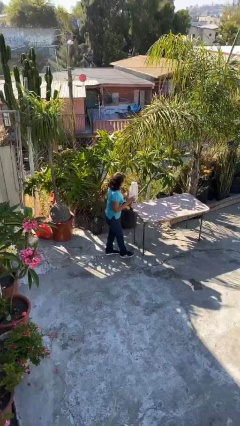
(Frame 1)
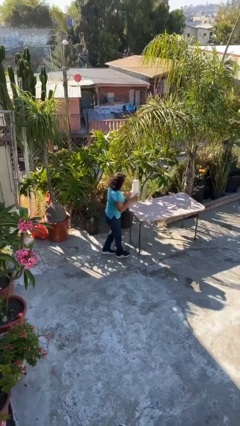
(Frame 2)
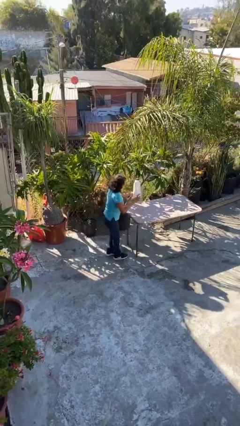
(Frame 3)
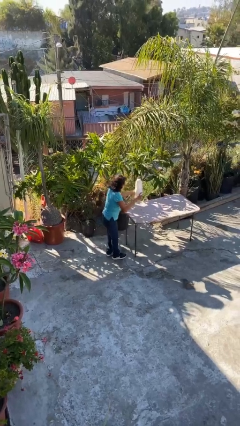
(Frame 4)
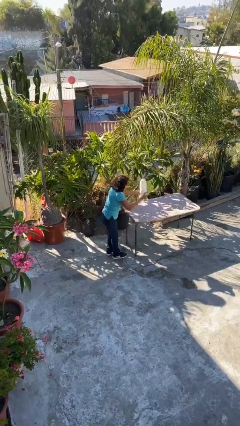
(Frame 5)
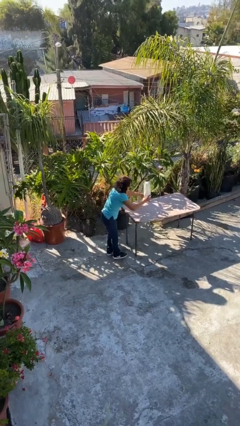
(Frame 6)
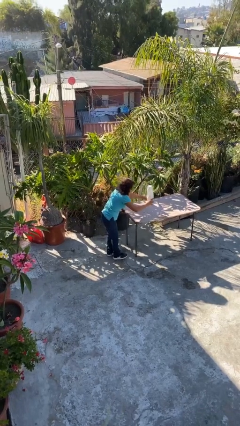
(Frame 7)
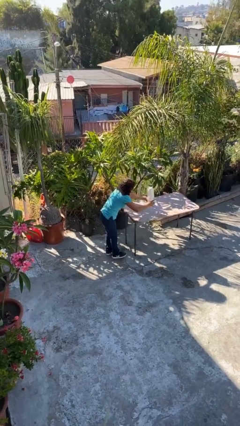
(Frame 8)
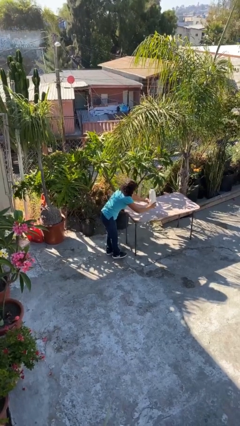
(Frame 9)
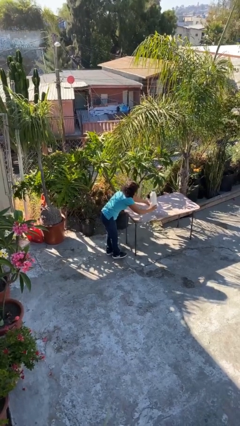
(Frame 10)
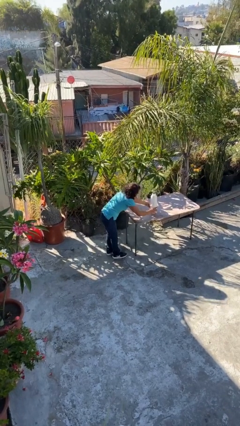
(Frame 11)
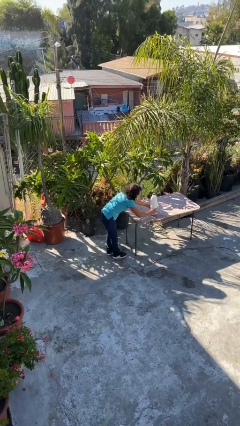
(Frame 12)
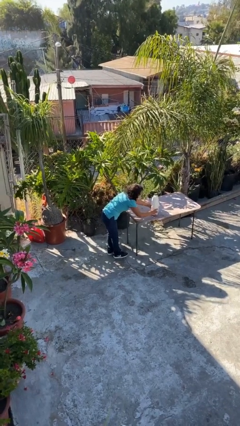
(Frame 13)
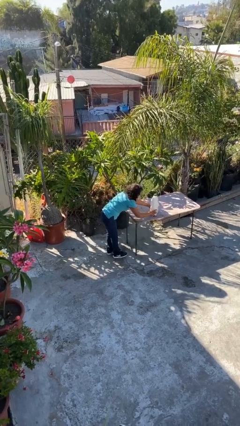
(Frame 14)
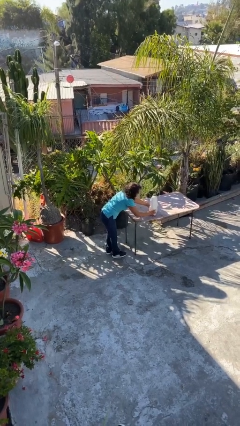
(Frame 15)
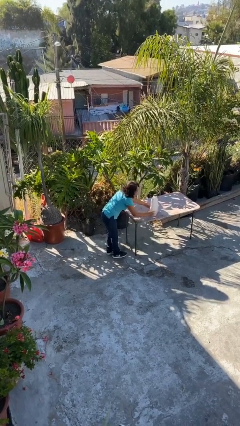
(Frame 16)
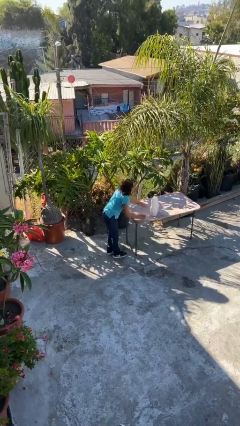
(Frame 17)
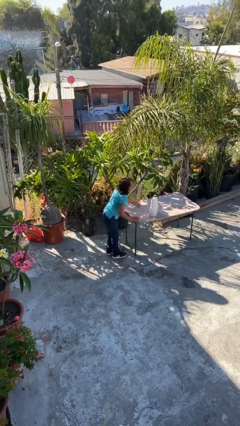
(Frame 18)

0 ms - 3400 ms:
person puts down object on table

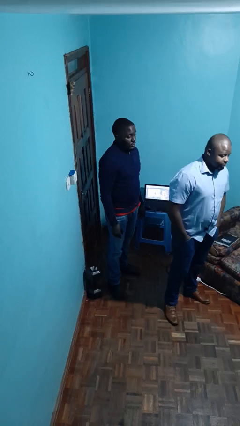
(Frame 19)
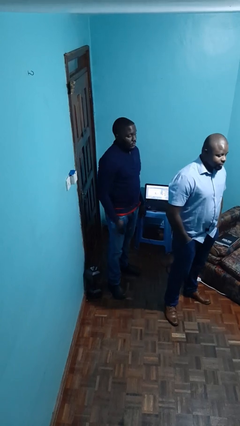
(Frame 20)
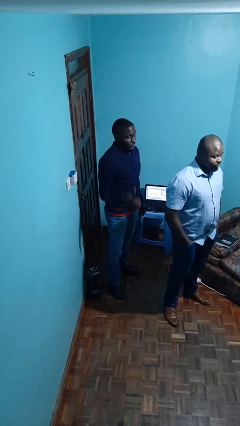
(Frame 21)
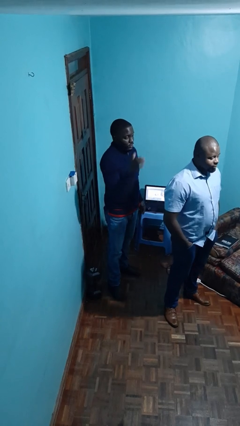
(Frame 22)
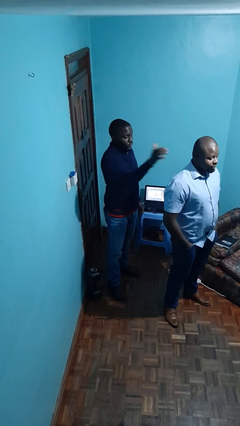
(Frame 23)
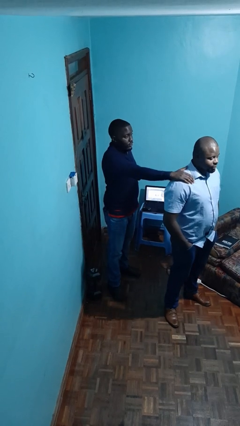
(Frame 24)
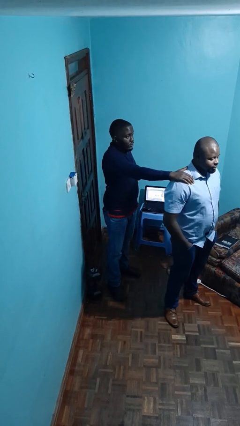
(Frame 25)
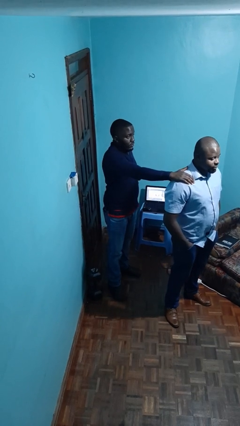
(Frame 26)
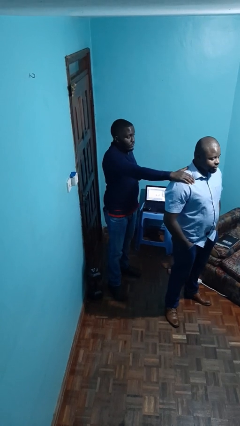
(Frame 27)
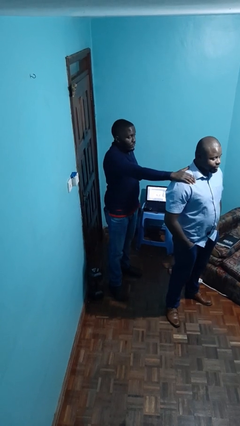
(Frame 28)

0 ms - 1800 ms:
person grabs person by shoulder

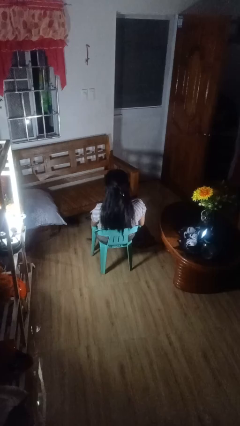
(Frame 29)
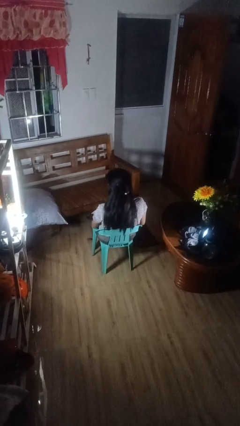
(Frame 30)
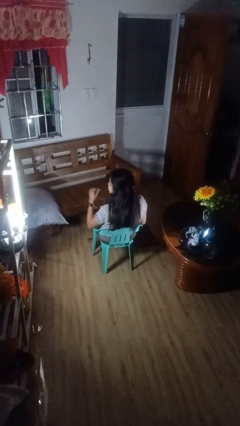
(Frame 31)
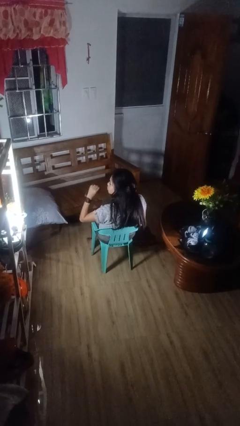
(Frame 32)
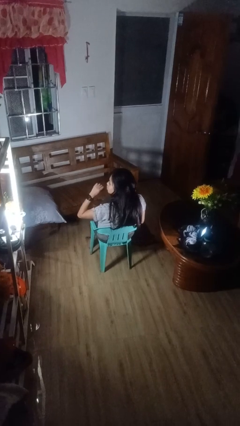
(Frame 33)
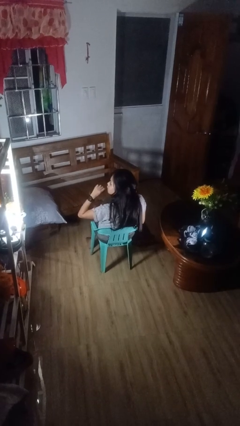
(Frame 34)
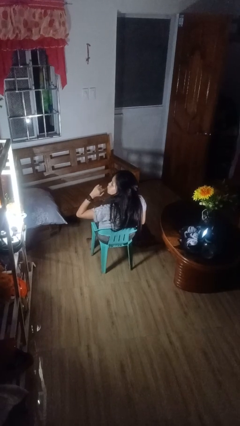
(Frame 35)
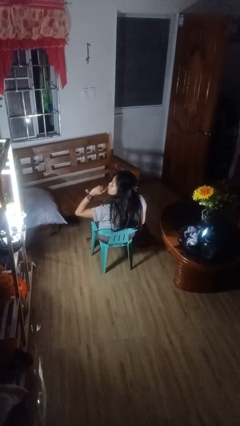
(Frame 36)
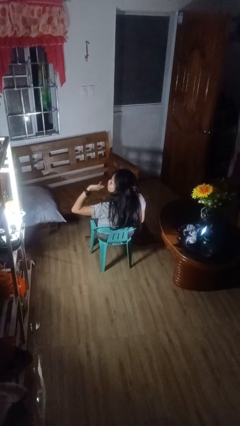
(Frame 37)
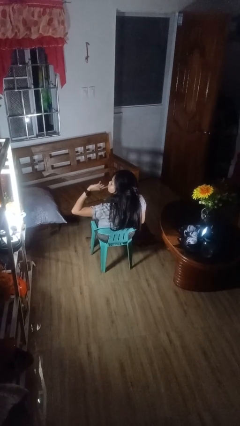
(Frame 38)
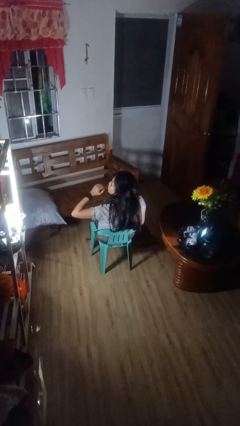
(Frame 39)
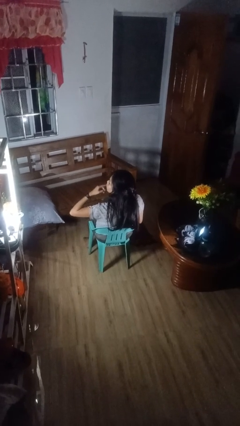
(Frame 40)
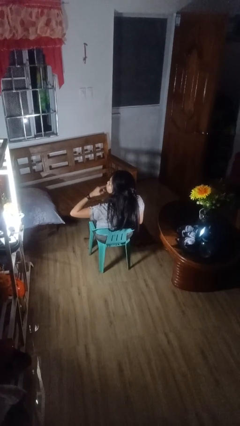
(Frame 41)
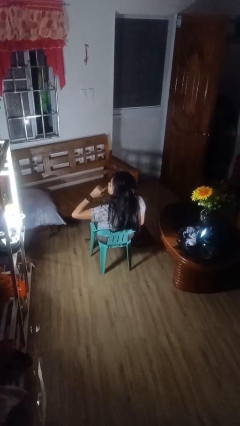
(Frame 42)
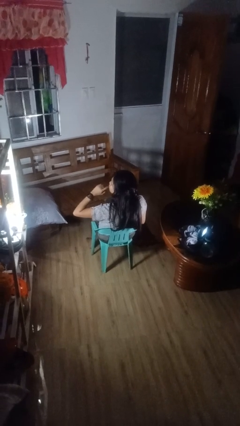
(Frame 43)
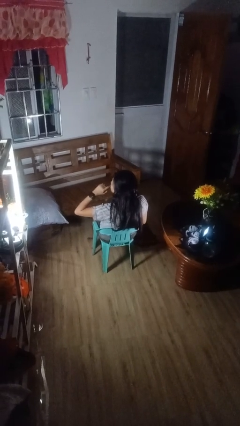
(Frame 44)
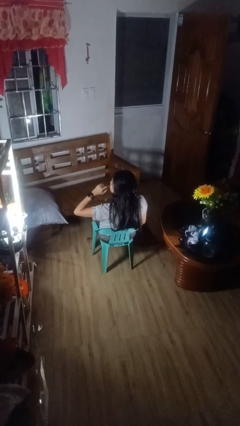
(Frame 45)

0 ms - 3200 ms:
person licks fingers

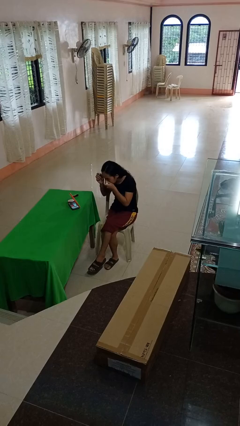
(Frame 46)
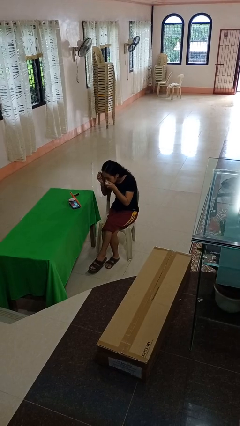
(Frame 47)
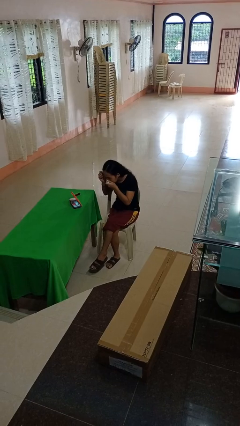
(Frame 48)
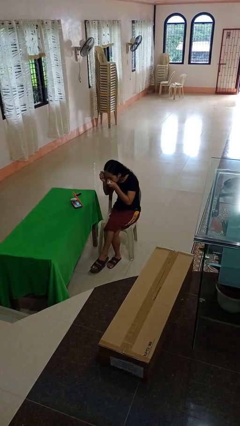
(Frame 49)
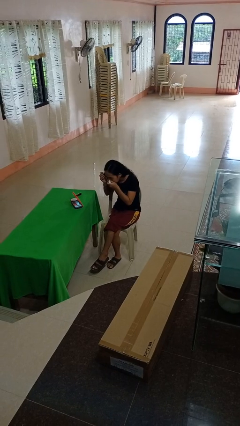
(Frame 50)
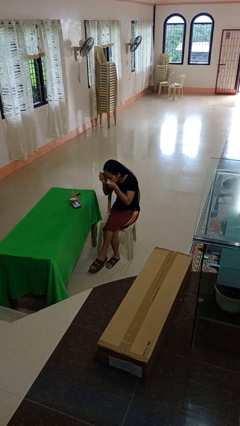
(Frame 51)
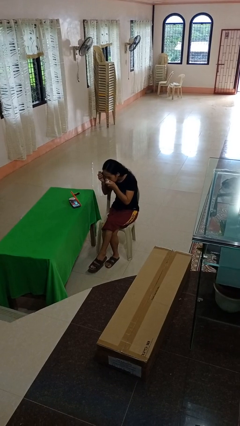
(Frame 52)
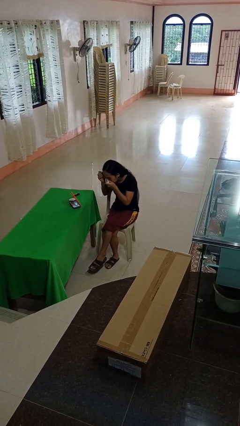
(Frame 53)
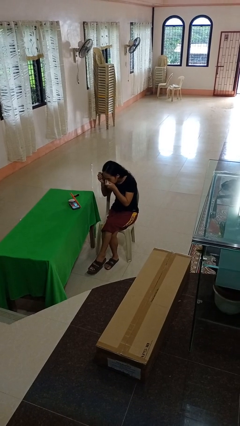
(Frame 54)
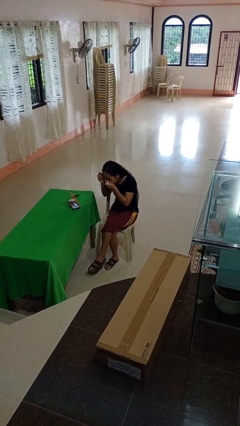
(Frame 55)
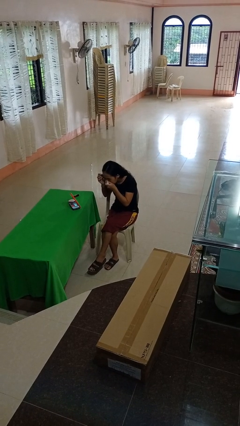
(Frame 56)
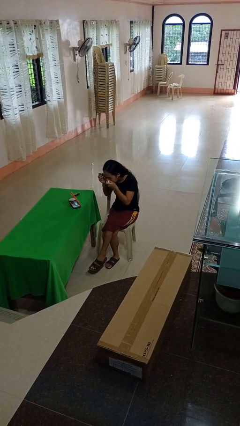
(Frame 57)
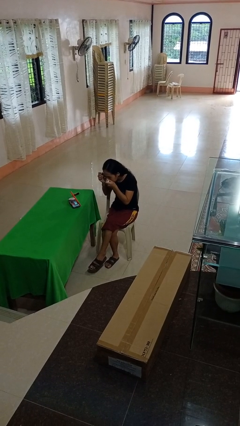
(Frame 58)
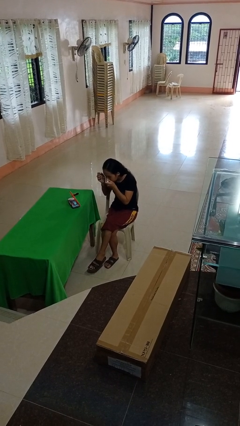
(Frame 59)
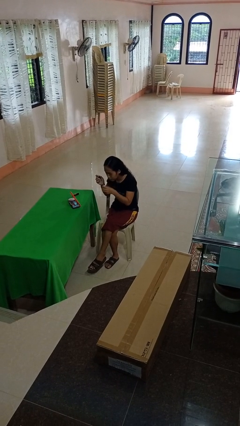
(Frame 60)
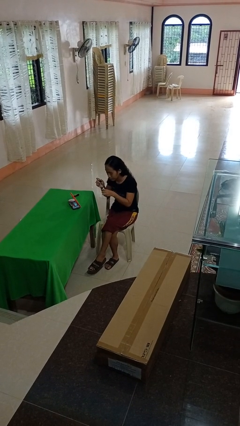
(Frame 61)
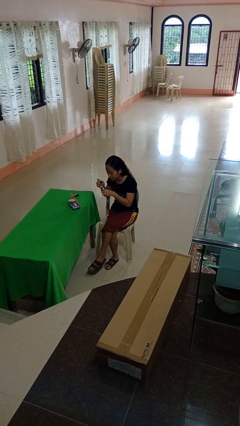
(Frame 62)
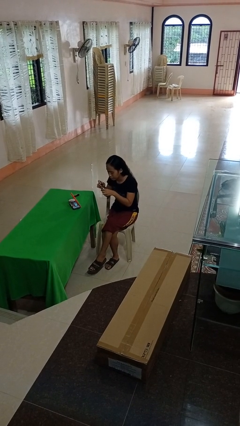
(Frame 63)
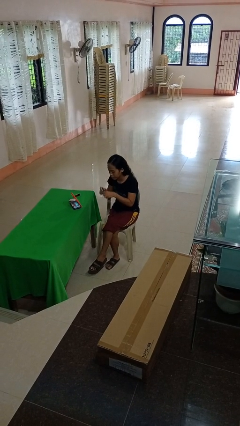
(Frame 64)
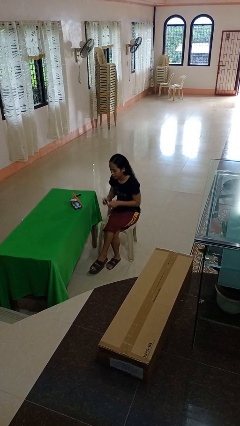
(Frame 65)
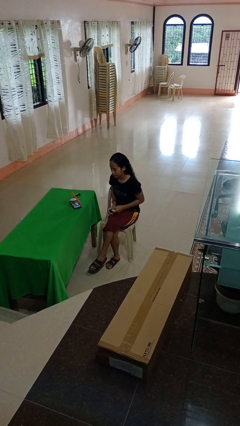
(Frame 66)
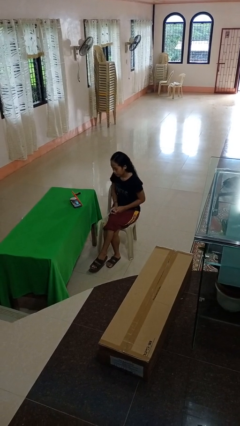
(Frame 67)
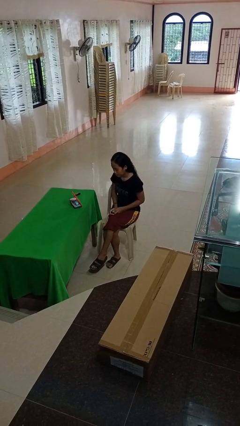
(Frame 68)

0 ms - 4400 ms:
person applies eye makeup

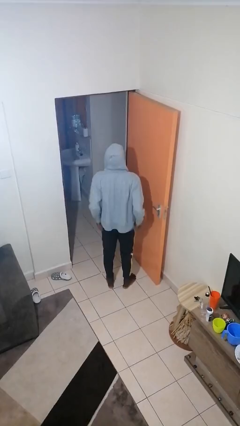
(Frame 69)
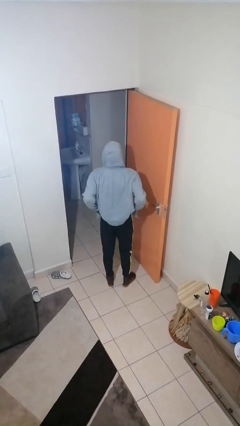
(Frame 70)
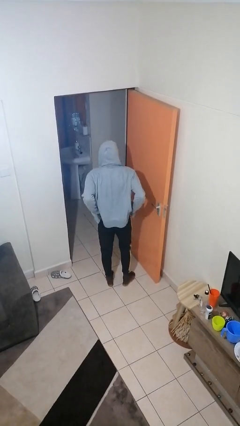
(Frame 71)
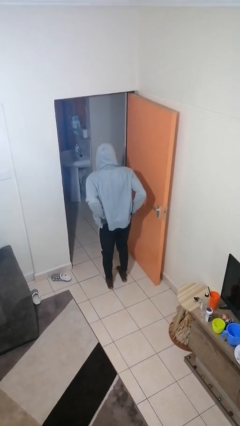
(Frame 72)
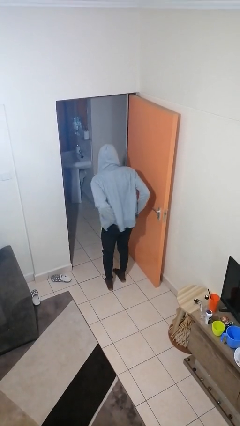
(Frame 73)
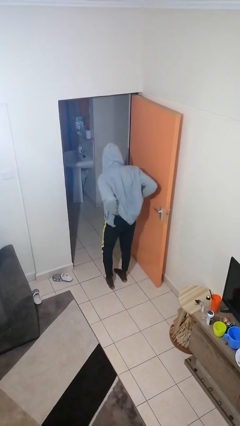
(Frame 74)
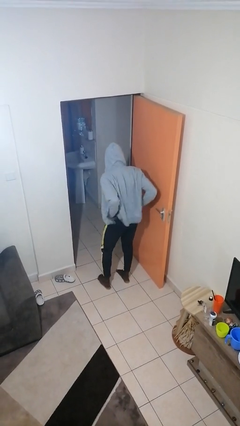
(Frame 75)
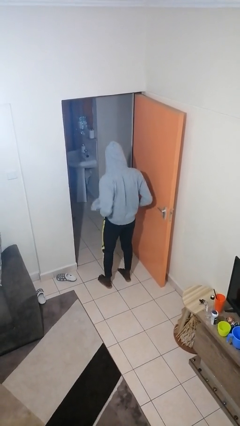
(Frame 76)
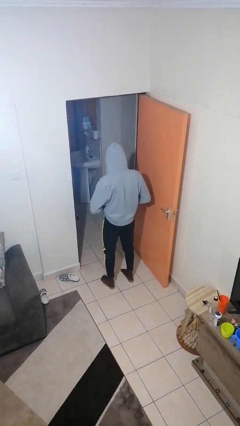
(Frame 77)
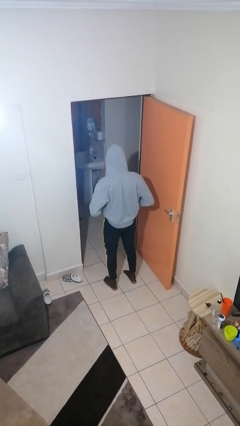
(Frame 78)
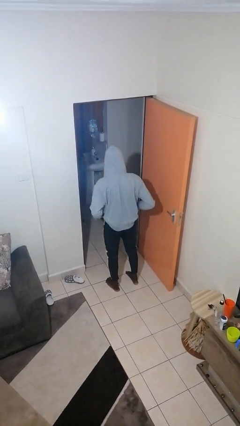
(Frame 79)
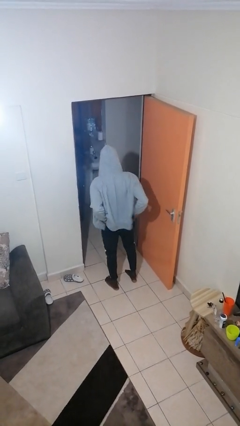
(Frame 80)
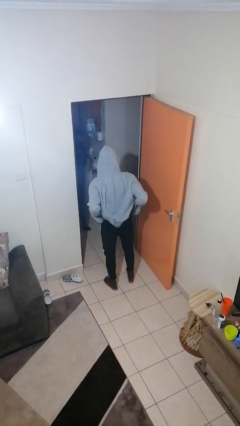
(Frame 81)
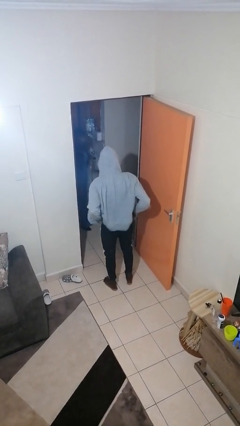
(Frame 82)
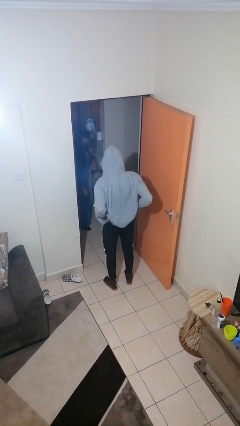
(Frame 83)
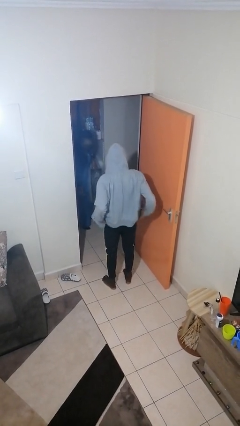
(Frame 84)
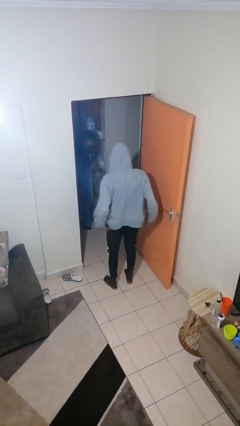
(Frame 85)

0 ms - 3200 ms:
person hikes up pants

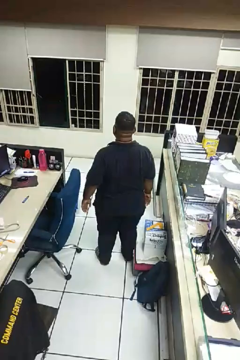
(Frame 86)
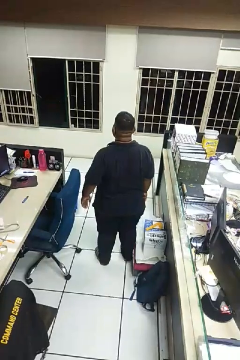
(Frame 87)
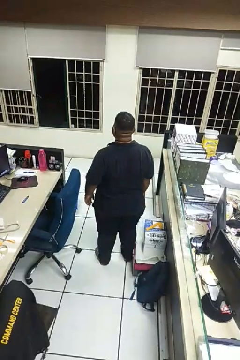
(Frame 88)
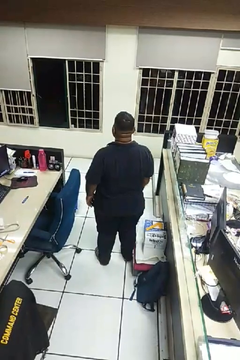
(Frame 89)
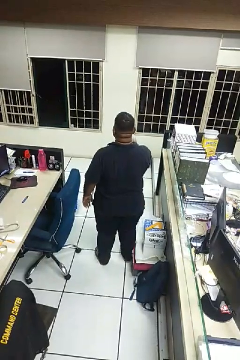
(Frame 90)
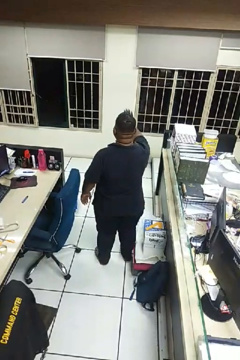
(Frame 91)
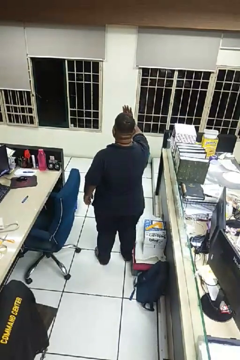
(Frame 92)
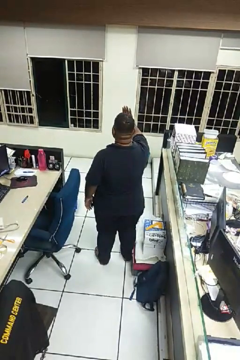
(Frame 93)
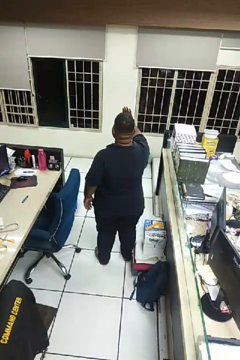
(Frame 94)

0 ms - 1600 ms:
person gestures stop
